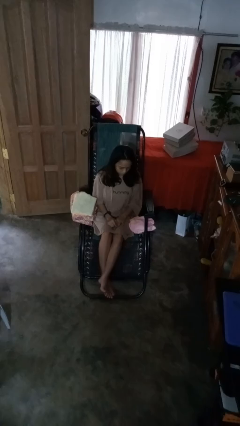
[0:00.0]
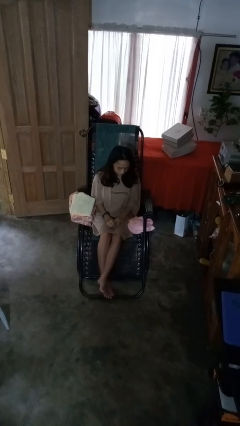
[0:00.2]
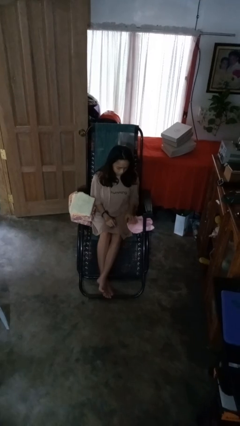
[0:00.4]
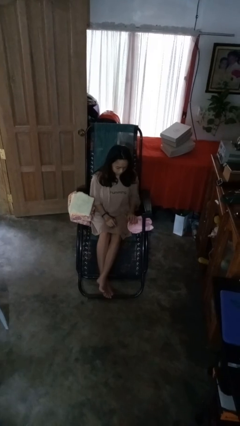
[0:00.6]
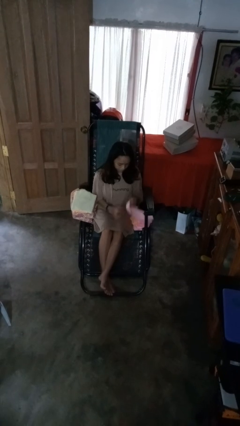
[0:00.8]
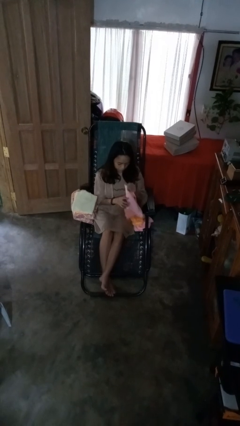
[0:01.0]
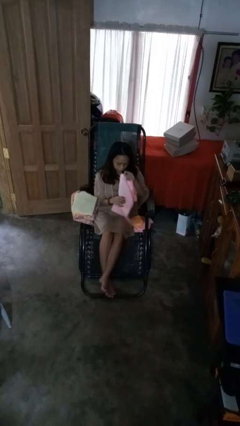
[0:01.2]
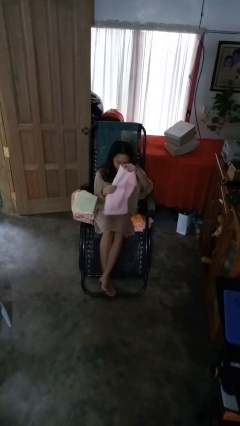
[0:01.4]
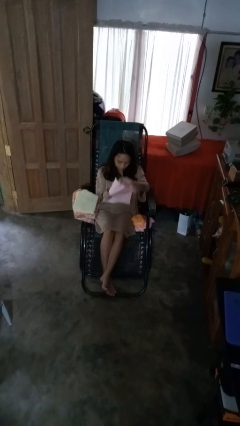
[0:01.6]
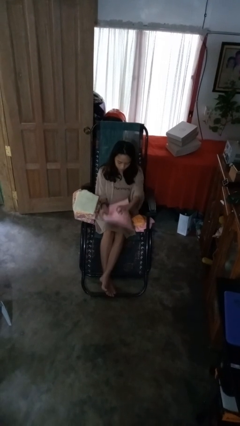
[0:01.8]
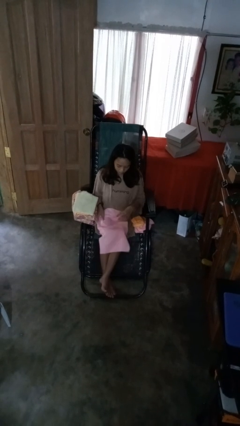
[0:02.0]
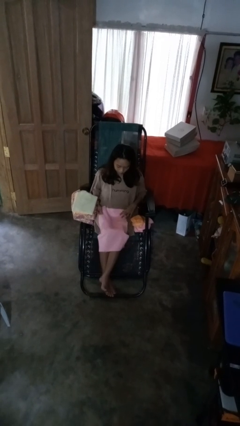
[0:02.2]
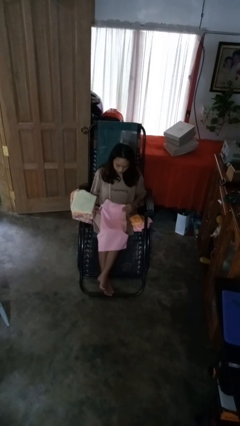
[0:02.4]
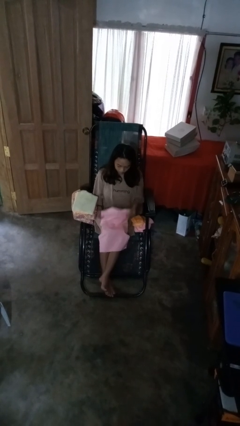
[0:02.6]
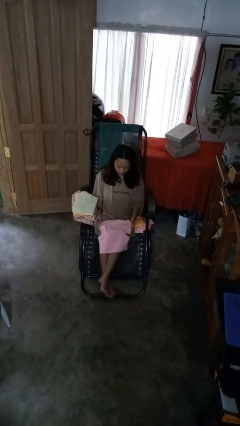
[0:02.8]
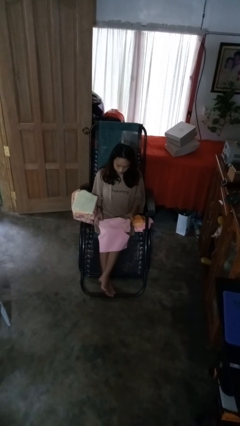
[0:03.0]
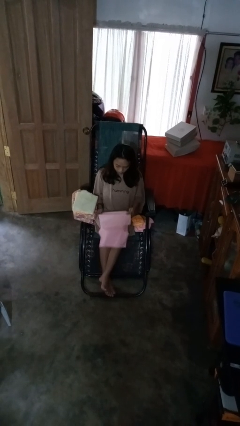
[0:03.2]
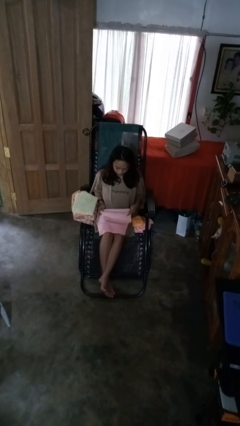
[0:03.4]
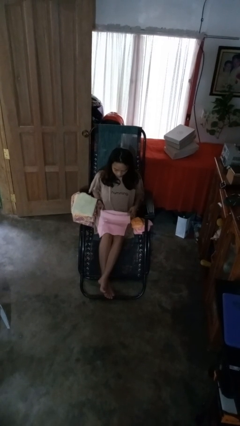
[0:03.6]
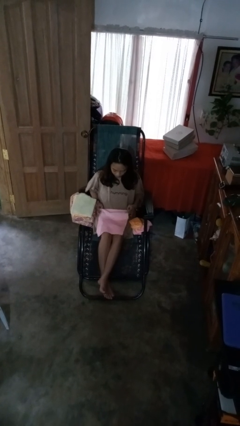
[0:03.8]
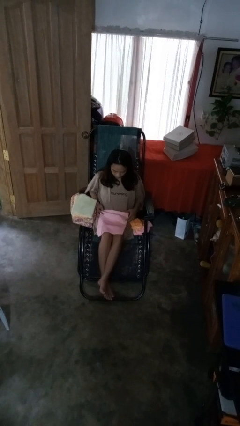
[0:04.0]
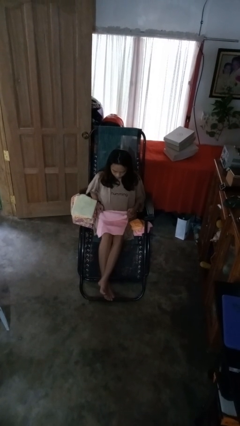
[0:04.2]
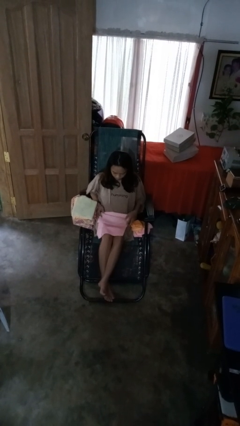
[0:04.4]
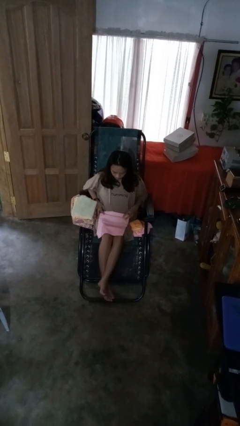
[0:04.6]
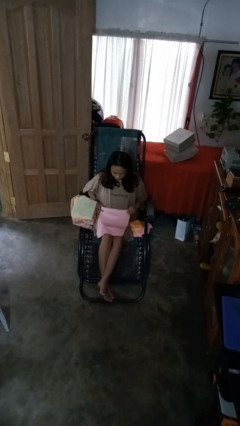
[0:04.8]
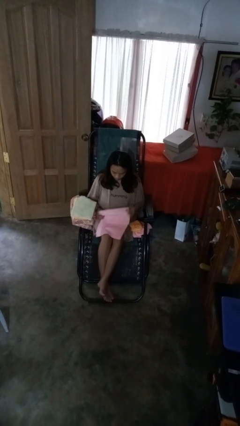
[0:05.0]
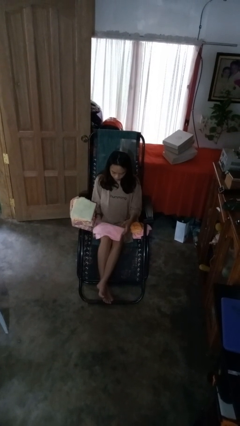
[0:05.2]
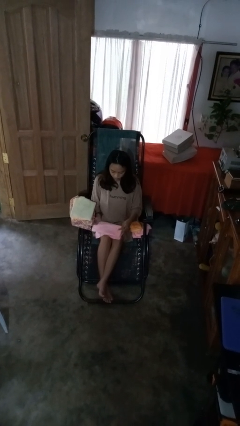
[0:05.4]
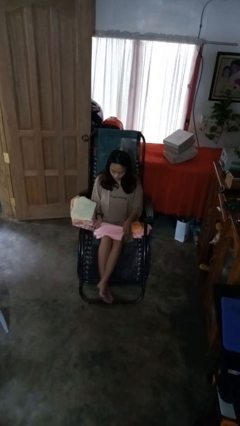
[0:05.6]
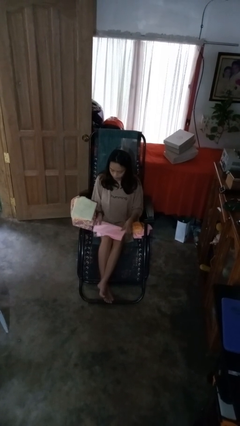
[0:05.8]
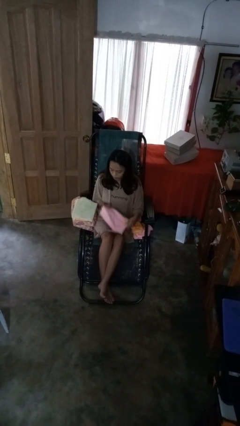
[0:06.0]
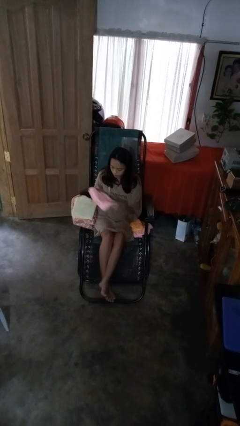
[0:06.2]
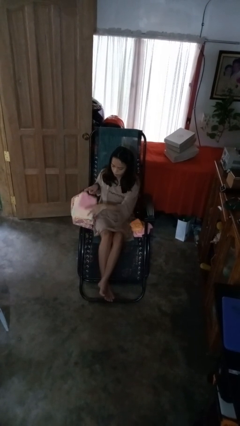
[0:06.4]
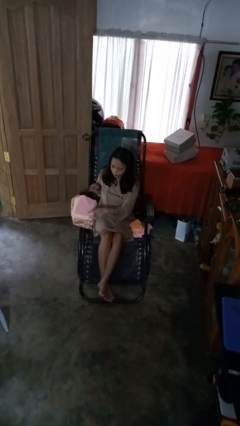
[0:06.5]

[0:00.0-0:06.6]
person folds towel

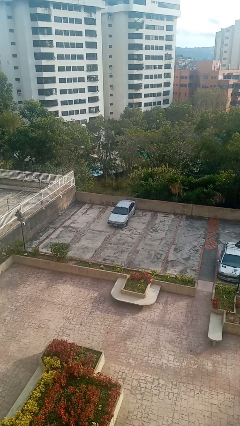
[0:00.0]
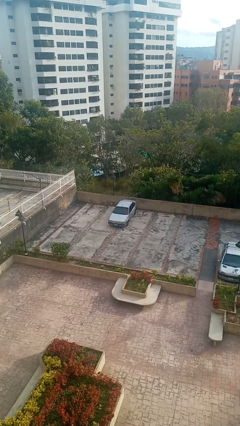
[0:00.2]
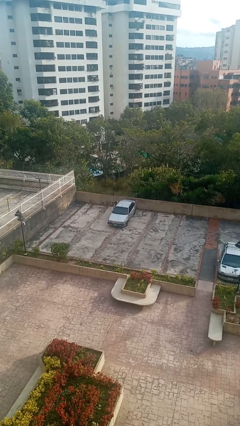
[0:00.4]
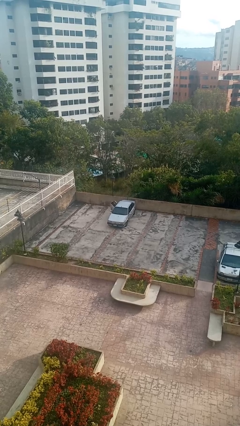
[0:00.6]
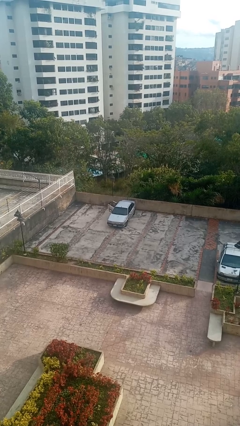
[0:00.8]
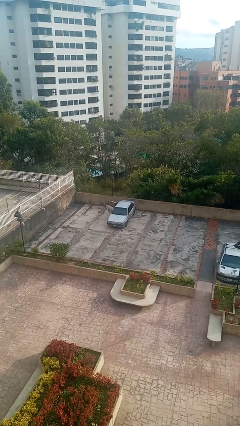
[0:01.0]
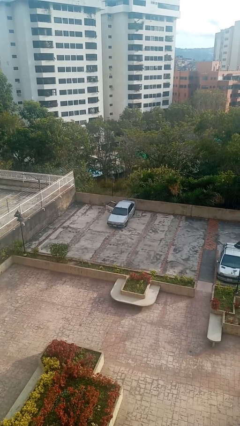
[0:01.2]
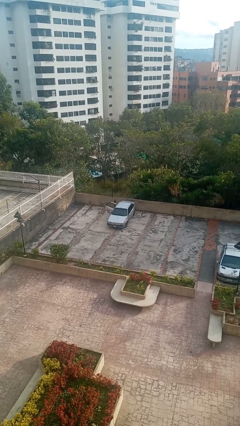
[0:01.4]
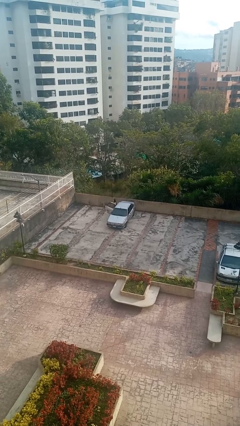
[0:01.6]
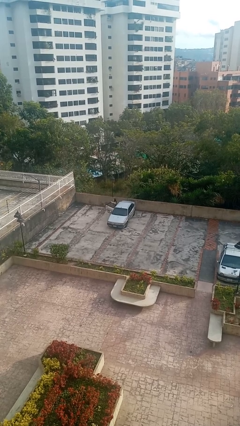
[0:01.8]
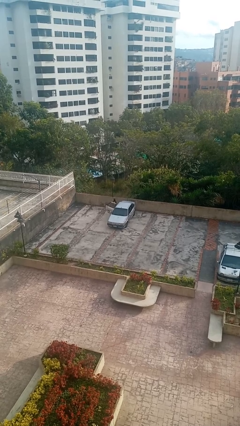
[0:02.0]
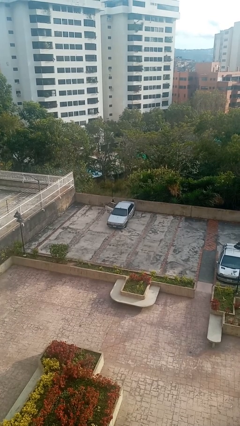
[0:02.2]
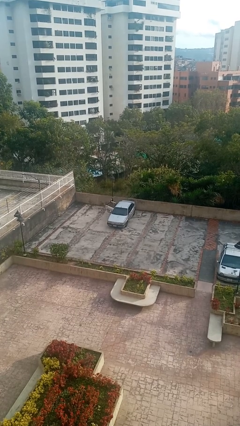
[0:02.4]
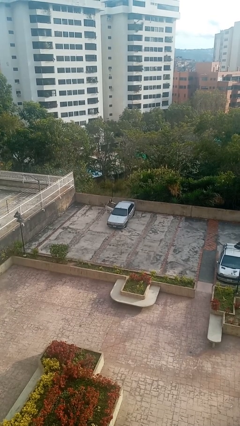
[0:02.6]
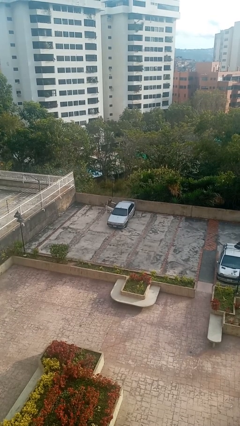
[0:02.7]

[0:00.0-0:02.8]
car drops off person

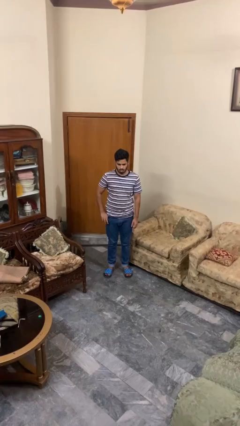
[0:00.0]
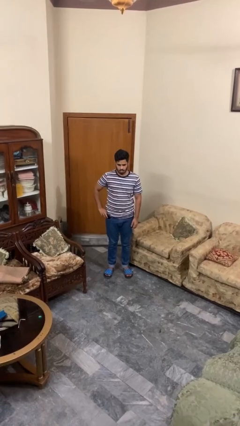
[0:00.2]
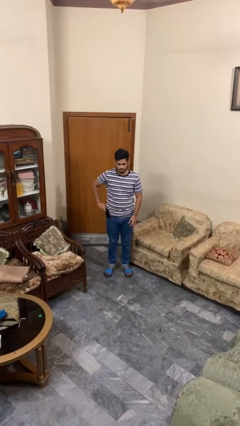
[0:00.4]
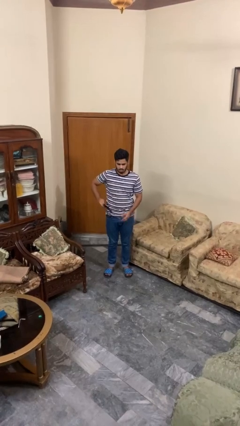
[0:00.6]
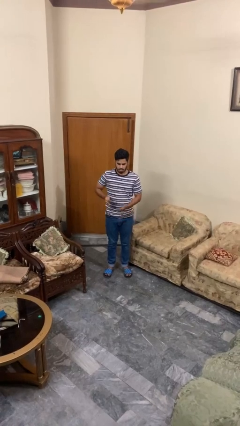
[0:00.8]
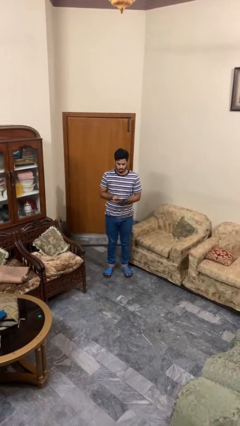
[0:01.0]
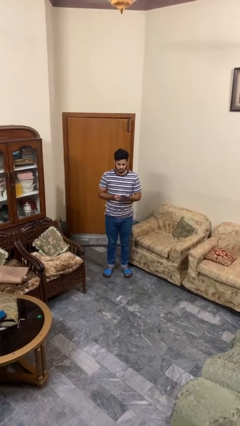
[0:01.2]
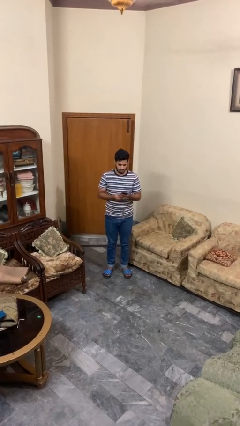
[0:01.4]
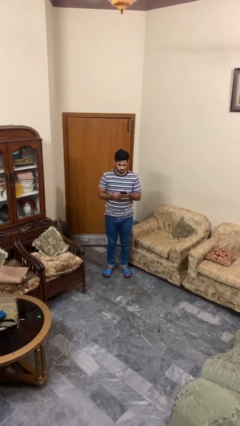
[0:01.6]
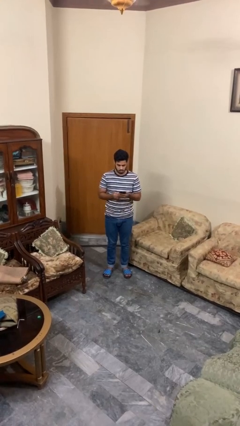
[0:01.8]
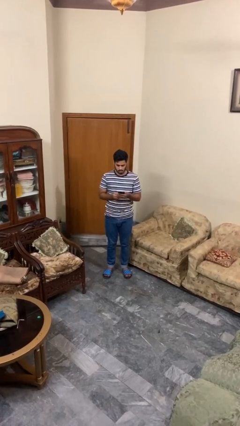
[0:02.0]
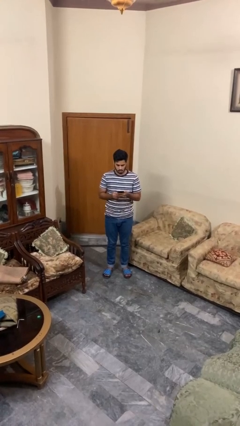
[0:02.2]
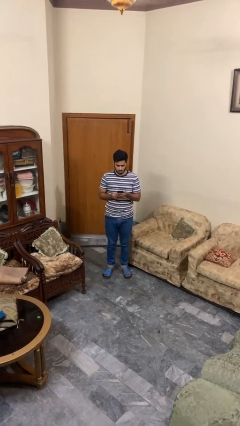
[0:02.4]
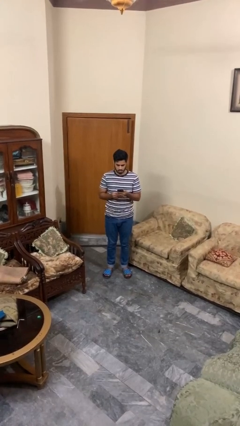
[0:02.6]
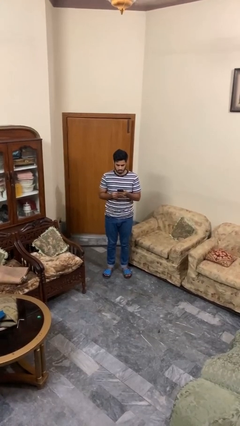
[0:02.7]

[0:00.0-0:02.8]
person takes phone from pocket

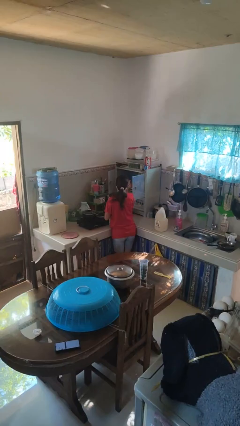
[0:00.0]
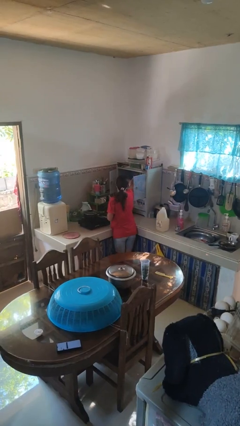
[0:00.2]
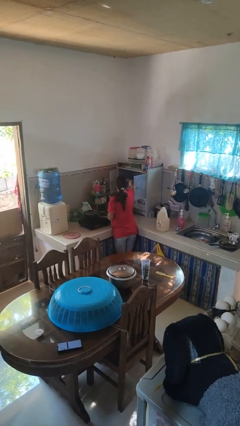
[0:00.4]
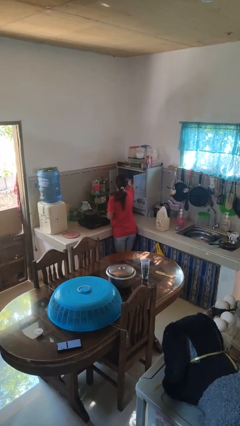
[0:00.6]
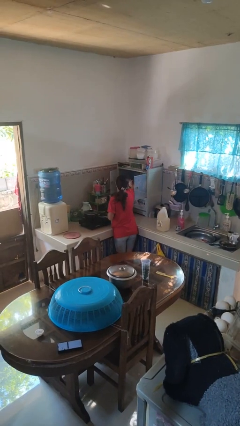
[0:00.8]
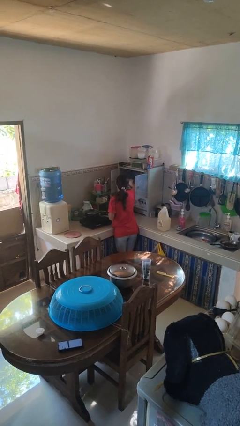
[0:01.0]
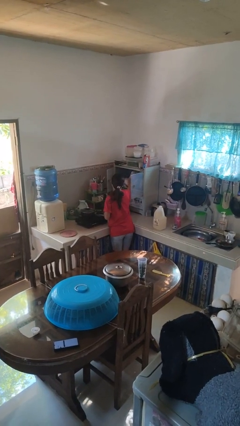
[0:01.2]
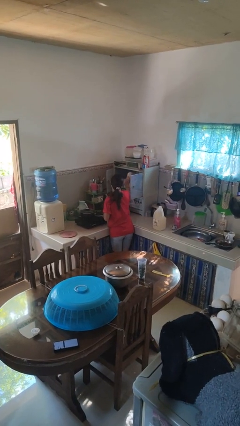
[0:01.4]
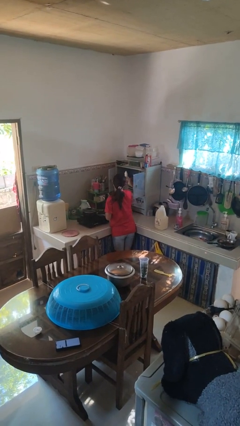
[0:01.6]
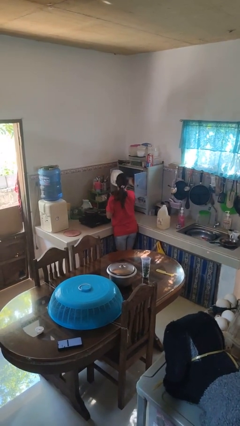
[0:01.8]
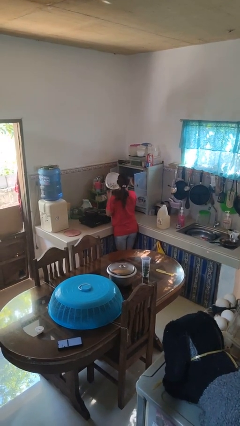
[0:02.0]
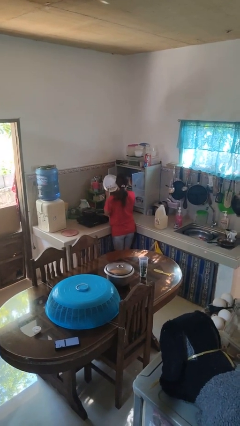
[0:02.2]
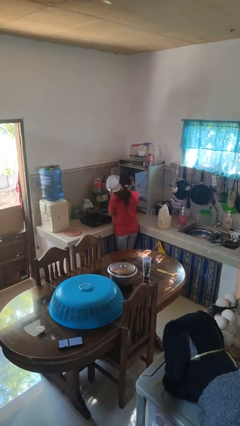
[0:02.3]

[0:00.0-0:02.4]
person takes object from cabinet

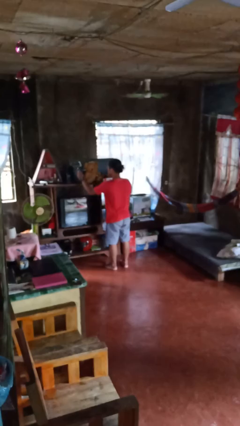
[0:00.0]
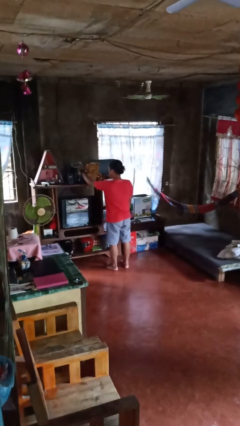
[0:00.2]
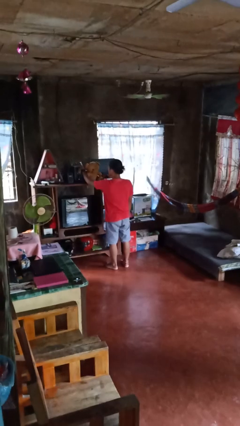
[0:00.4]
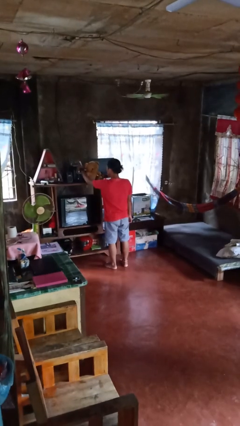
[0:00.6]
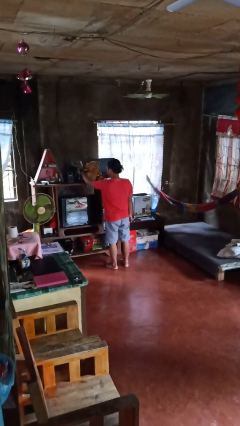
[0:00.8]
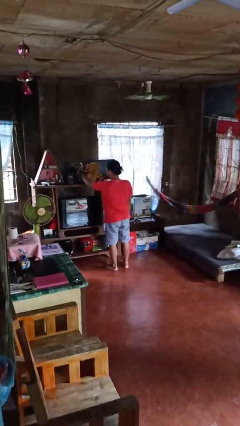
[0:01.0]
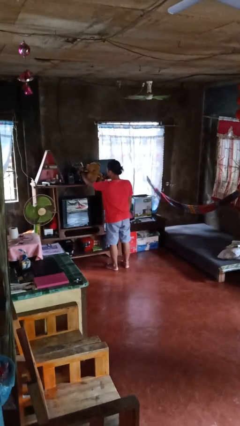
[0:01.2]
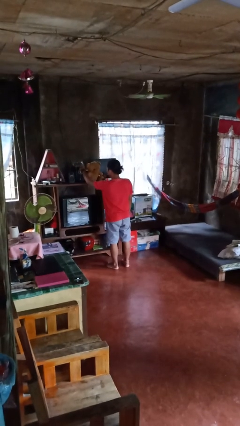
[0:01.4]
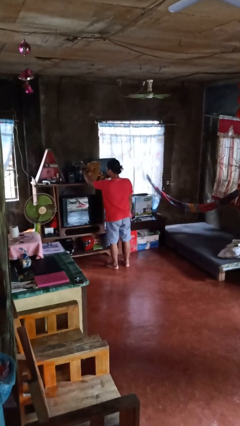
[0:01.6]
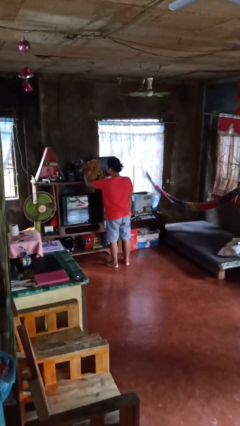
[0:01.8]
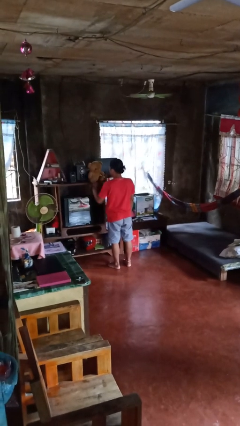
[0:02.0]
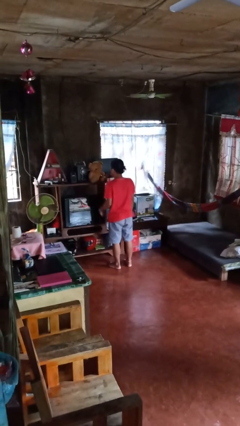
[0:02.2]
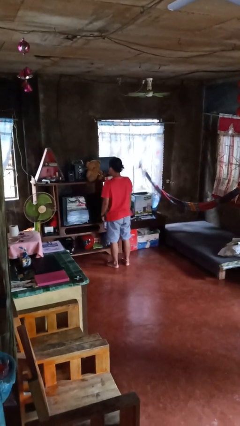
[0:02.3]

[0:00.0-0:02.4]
person taps object with finger

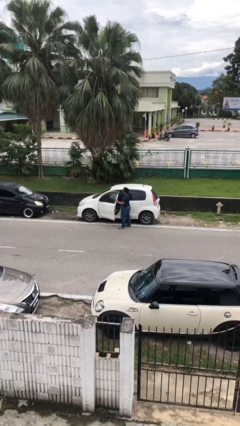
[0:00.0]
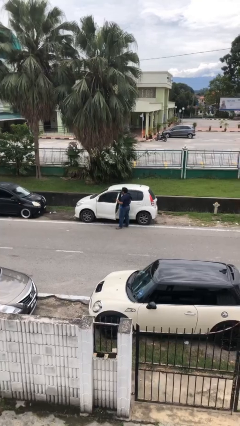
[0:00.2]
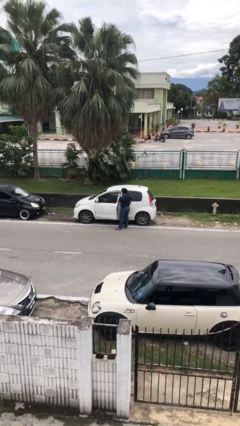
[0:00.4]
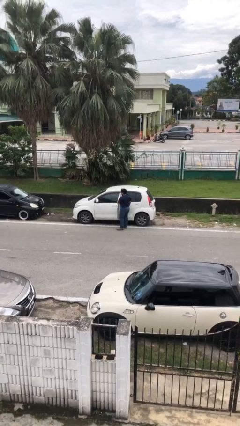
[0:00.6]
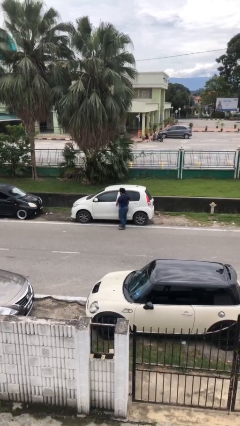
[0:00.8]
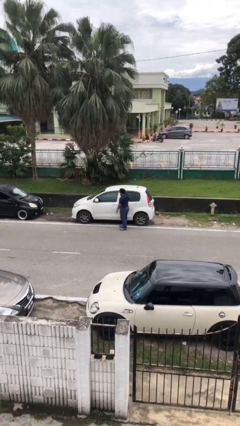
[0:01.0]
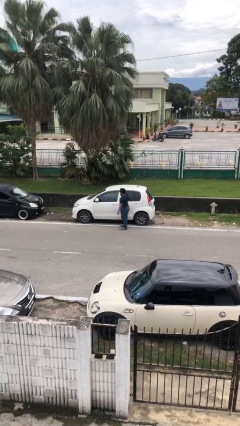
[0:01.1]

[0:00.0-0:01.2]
person closes car door
